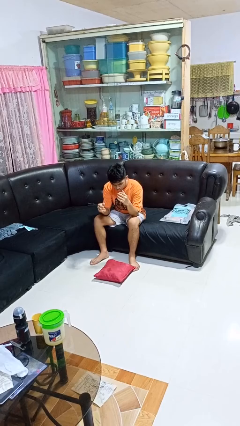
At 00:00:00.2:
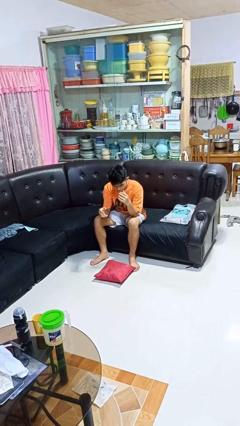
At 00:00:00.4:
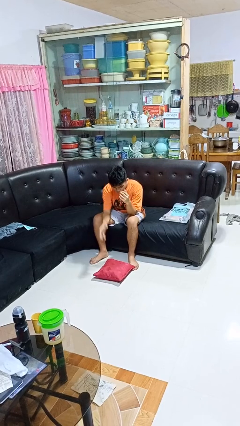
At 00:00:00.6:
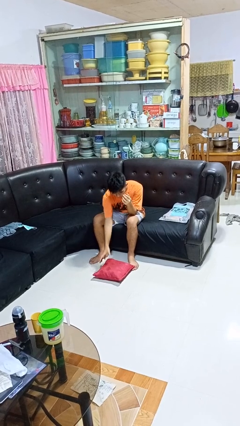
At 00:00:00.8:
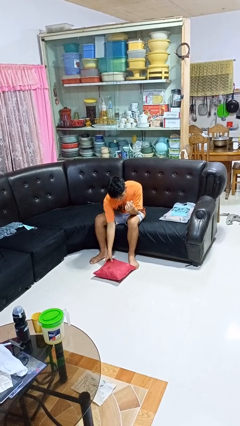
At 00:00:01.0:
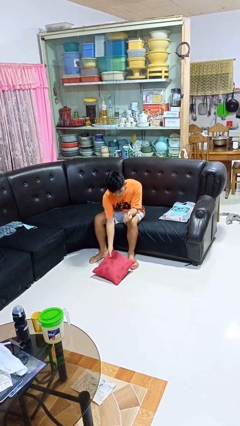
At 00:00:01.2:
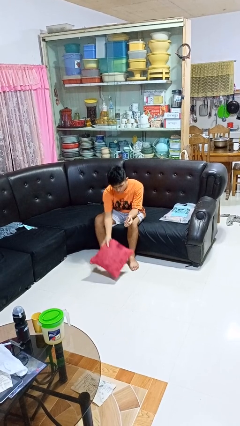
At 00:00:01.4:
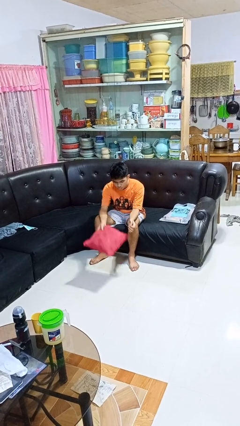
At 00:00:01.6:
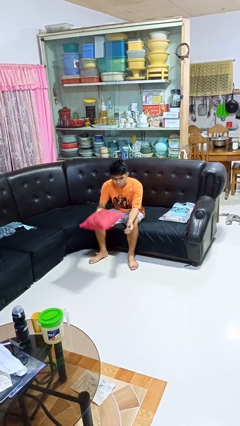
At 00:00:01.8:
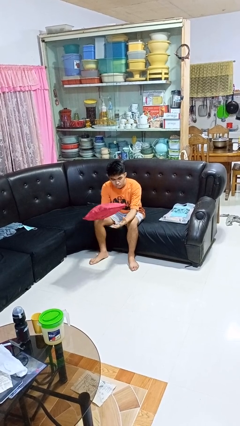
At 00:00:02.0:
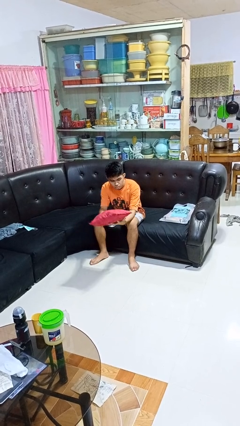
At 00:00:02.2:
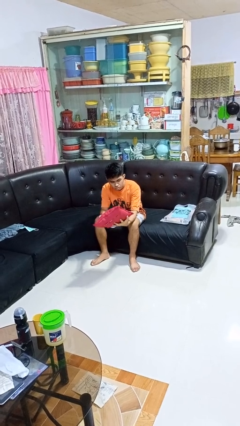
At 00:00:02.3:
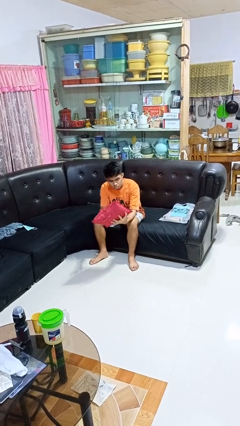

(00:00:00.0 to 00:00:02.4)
person picks up object from floor

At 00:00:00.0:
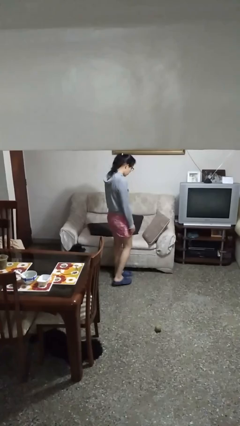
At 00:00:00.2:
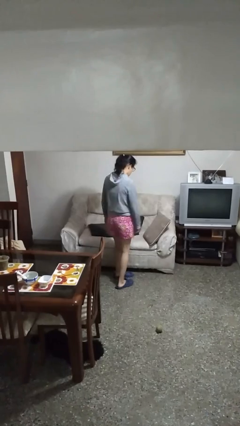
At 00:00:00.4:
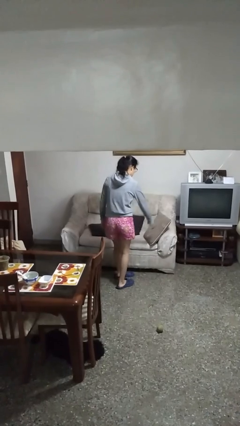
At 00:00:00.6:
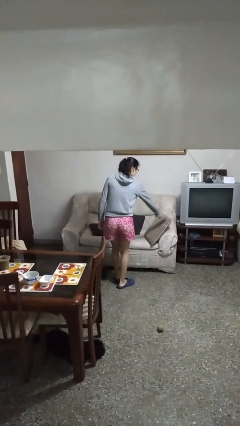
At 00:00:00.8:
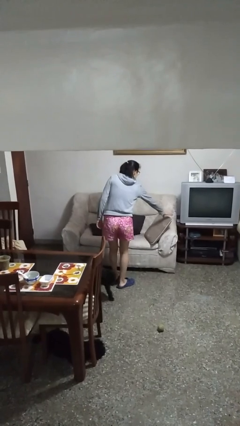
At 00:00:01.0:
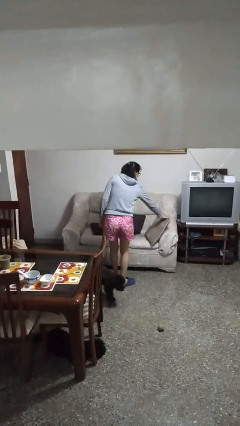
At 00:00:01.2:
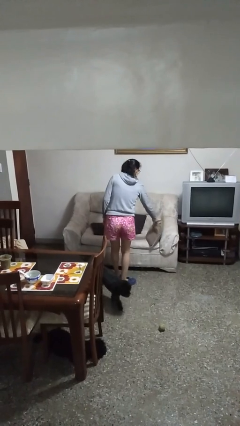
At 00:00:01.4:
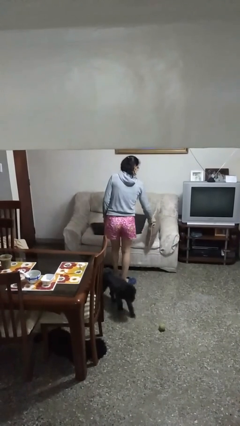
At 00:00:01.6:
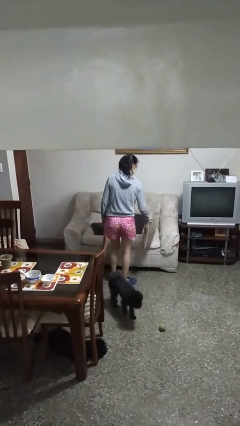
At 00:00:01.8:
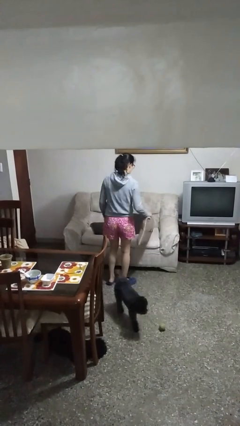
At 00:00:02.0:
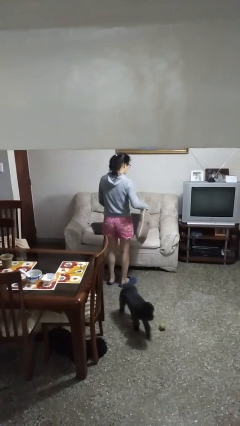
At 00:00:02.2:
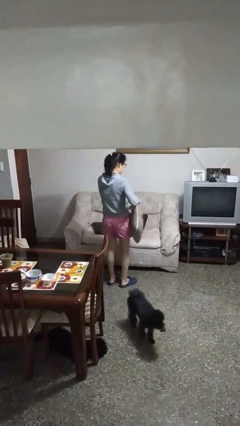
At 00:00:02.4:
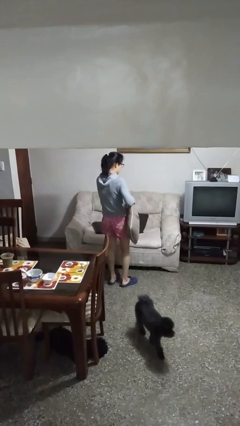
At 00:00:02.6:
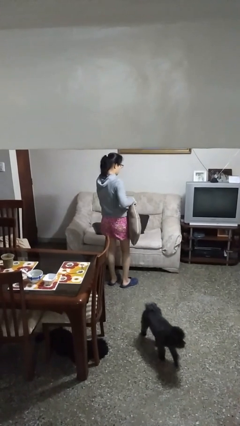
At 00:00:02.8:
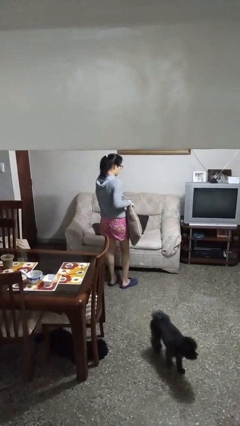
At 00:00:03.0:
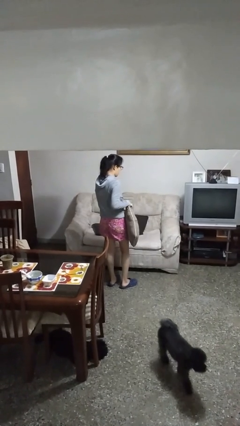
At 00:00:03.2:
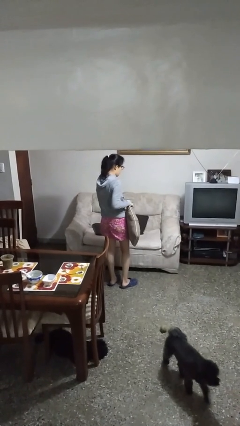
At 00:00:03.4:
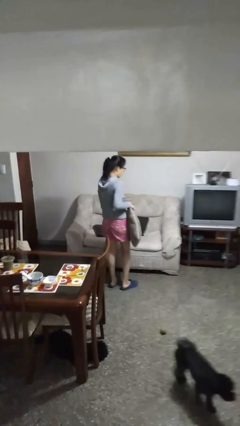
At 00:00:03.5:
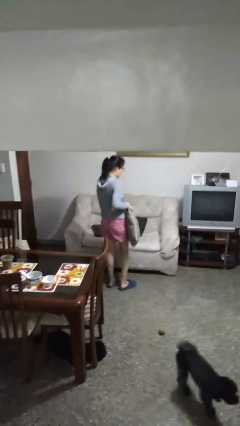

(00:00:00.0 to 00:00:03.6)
person picks up object from couch

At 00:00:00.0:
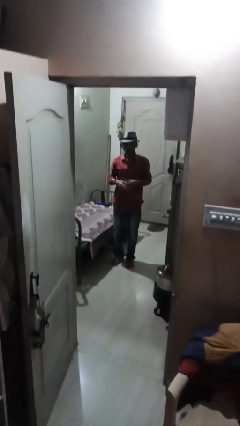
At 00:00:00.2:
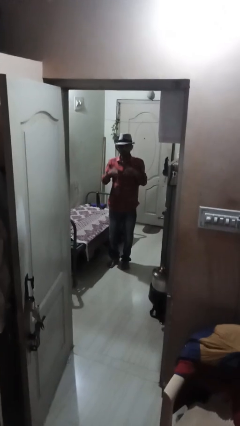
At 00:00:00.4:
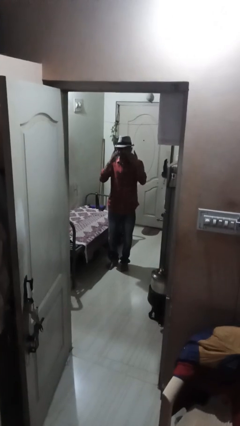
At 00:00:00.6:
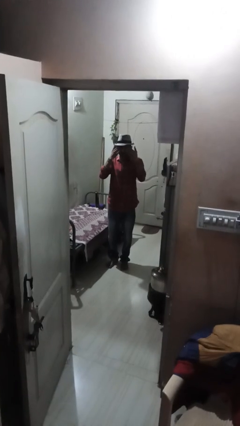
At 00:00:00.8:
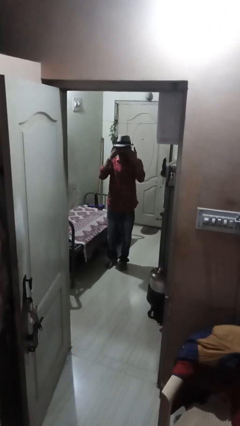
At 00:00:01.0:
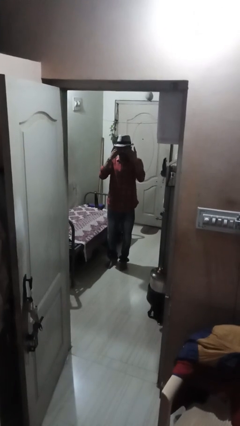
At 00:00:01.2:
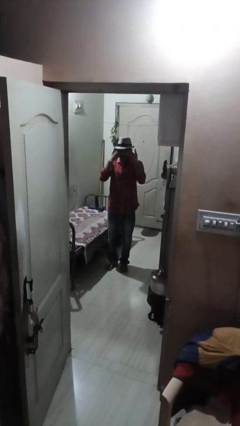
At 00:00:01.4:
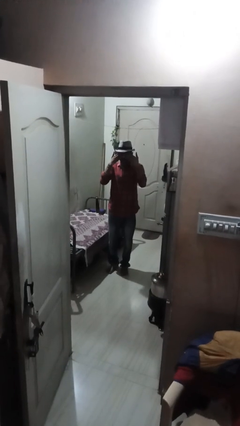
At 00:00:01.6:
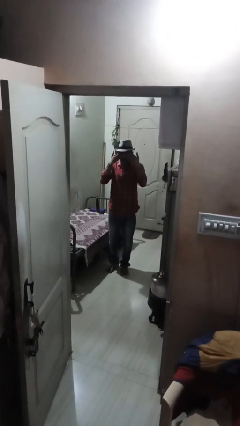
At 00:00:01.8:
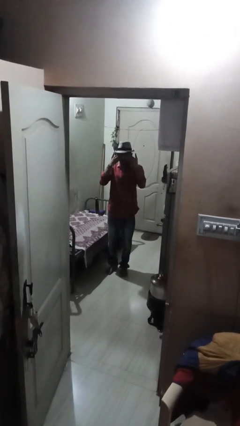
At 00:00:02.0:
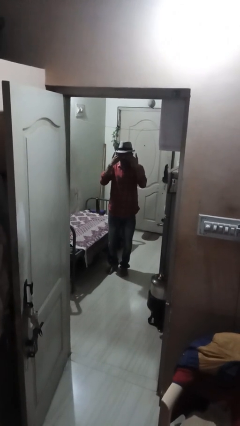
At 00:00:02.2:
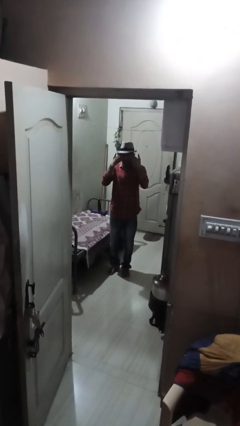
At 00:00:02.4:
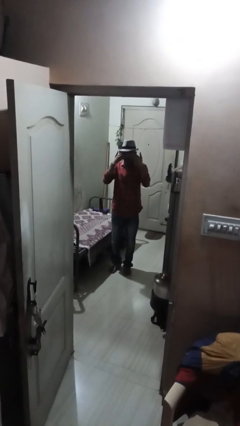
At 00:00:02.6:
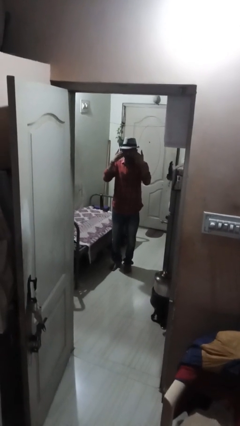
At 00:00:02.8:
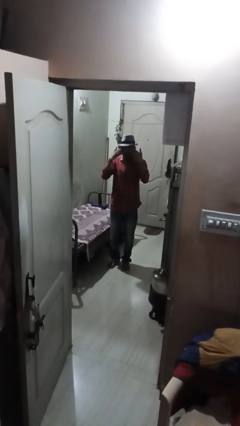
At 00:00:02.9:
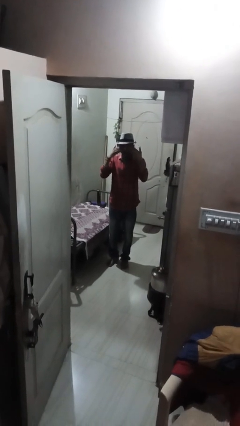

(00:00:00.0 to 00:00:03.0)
person rubs eyes

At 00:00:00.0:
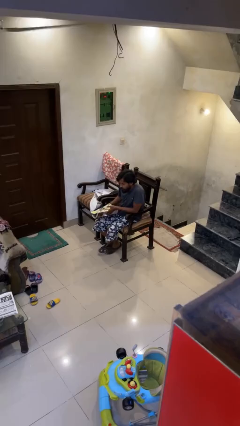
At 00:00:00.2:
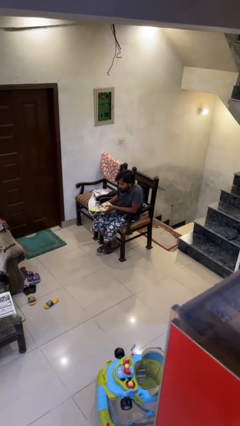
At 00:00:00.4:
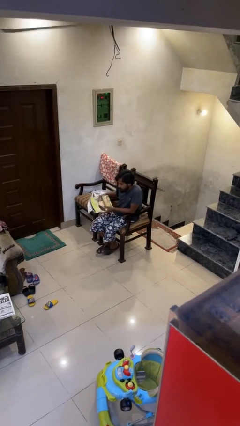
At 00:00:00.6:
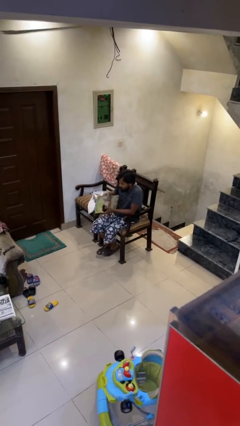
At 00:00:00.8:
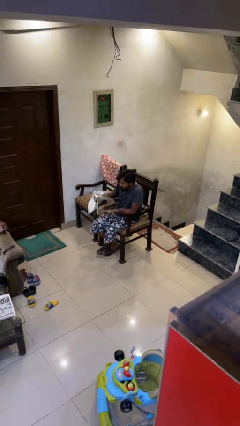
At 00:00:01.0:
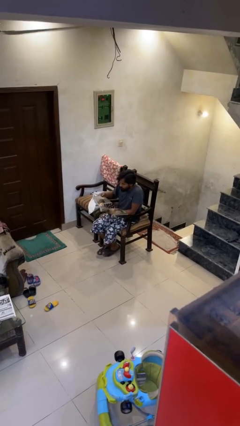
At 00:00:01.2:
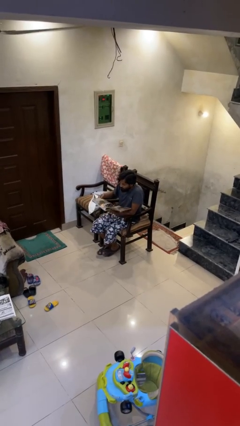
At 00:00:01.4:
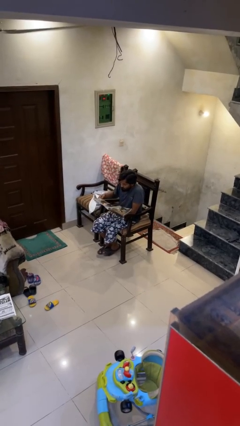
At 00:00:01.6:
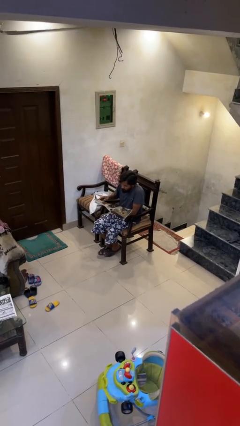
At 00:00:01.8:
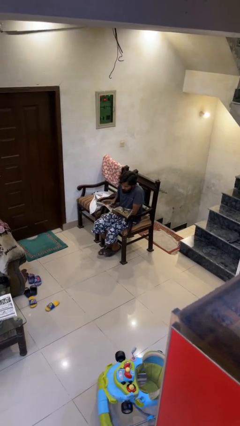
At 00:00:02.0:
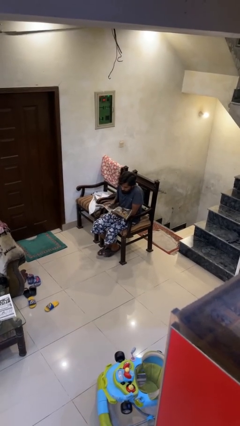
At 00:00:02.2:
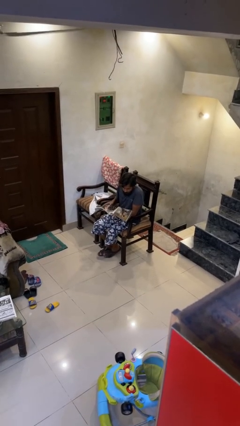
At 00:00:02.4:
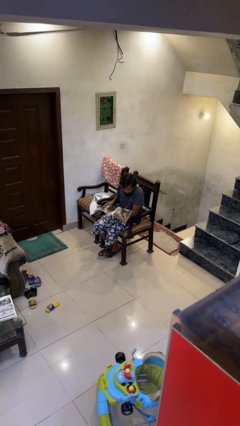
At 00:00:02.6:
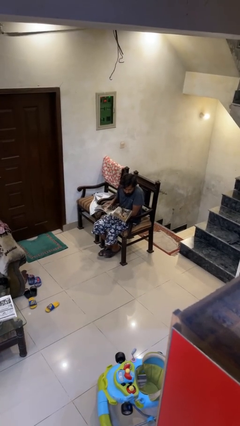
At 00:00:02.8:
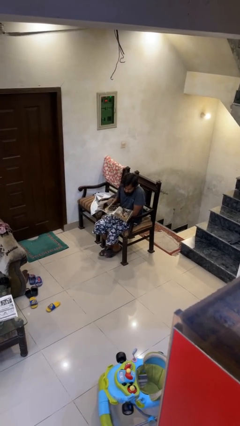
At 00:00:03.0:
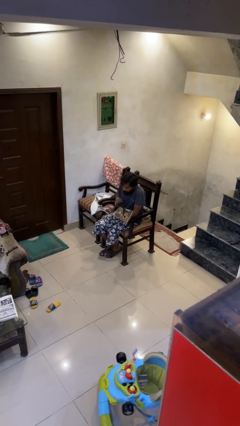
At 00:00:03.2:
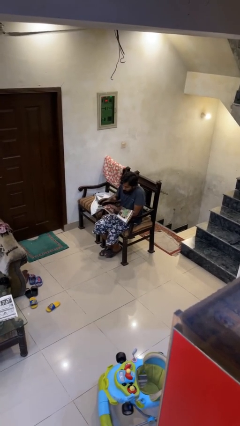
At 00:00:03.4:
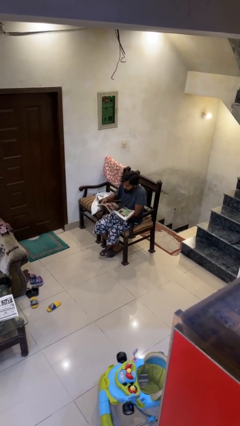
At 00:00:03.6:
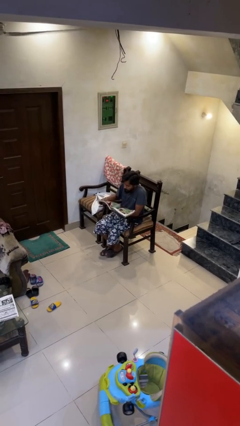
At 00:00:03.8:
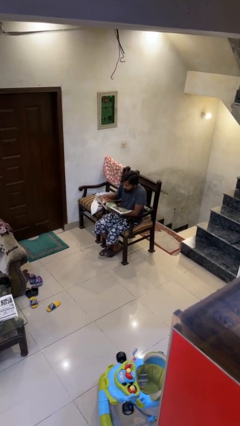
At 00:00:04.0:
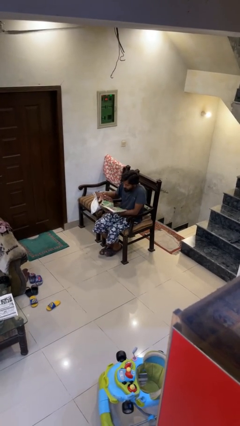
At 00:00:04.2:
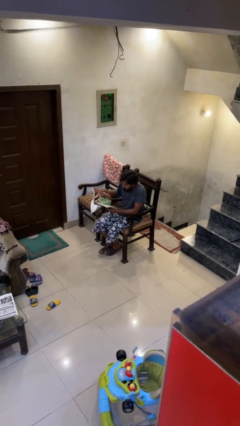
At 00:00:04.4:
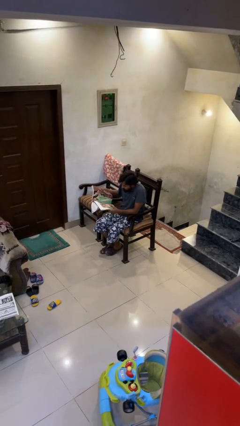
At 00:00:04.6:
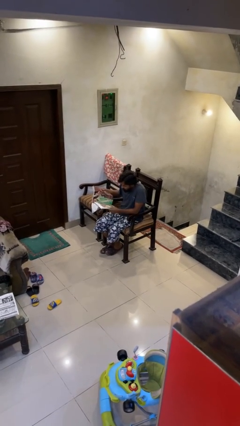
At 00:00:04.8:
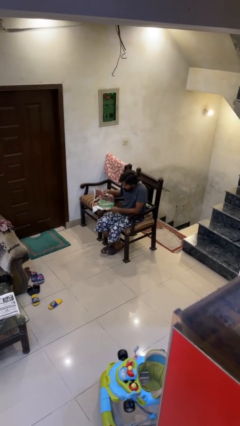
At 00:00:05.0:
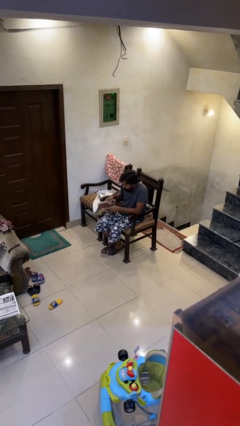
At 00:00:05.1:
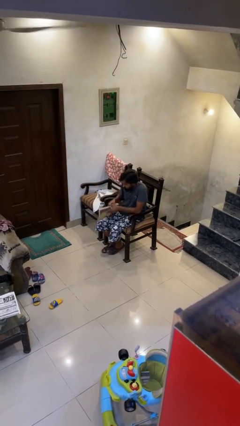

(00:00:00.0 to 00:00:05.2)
person reads magazine

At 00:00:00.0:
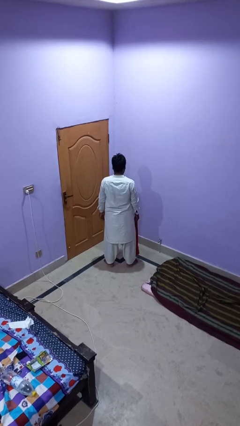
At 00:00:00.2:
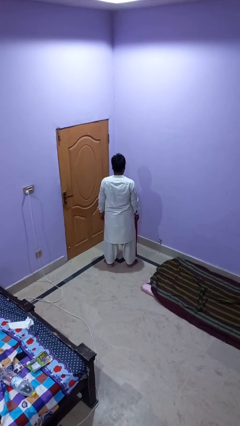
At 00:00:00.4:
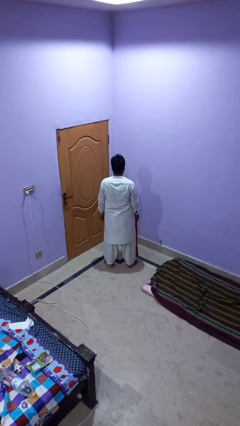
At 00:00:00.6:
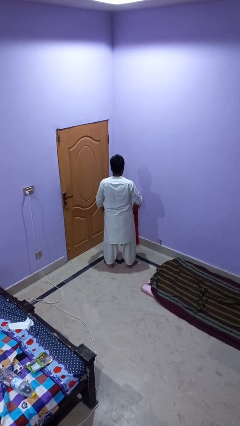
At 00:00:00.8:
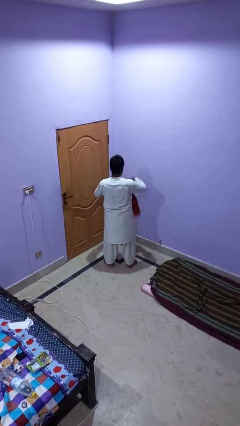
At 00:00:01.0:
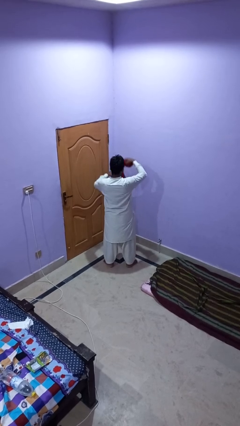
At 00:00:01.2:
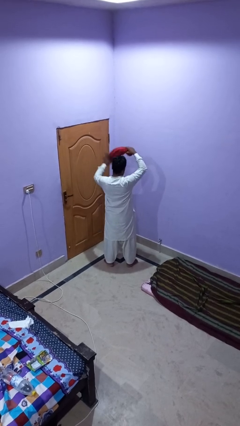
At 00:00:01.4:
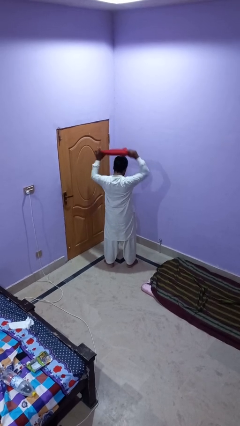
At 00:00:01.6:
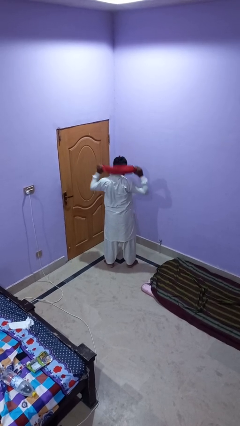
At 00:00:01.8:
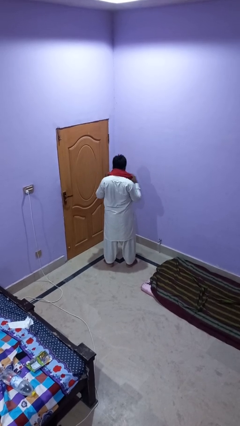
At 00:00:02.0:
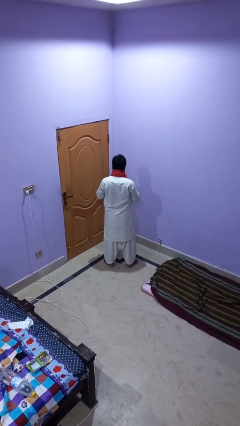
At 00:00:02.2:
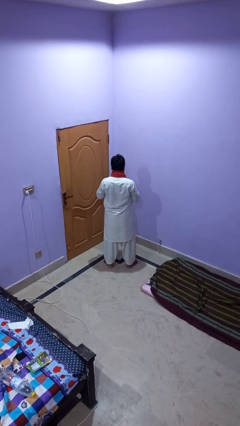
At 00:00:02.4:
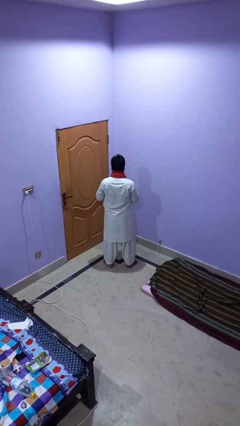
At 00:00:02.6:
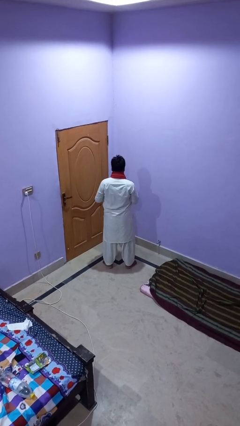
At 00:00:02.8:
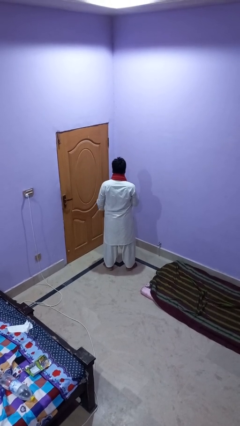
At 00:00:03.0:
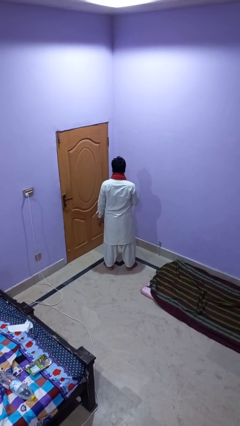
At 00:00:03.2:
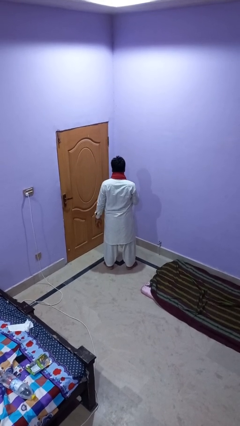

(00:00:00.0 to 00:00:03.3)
person puts on scarf
